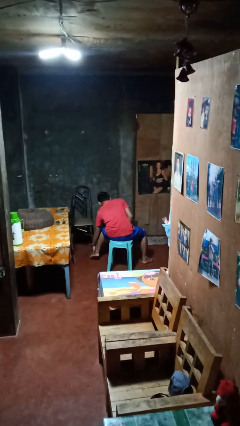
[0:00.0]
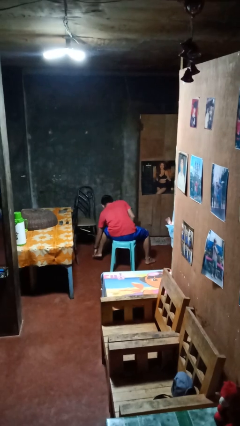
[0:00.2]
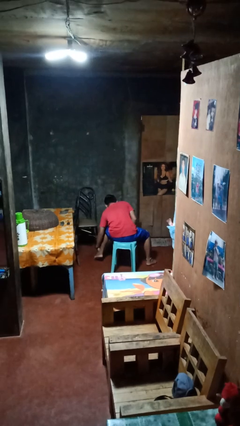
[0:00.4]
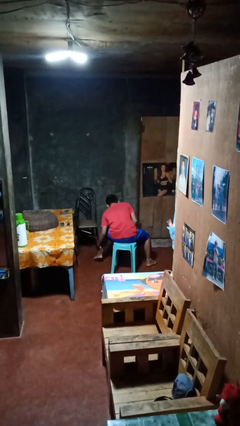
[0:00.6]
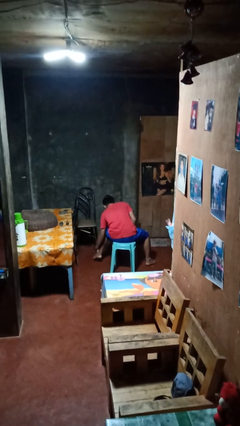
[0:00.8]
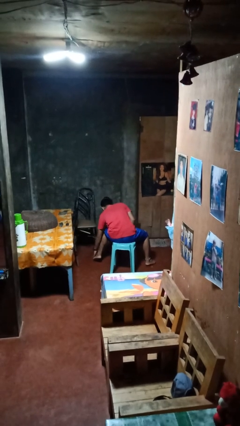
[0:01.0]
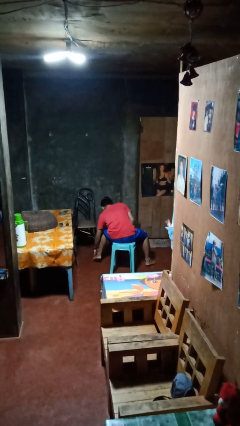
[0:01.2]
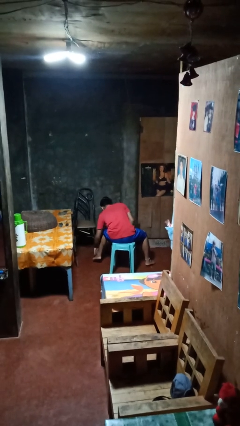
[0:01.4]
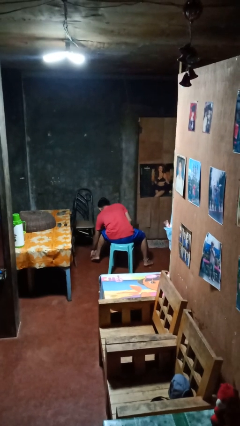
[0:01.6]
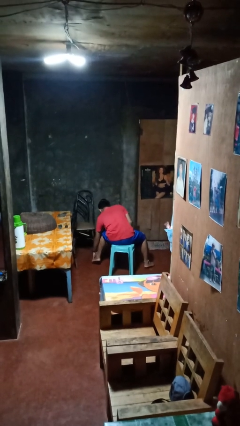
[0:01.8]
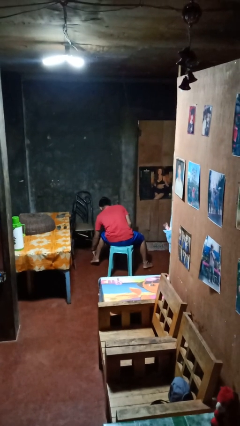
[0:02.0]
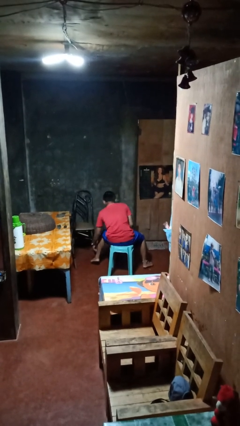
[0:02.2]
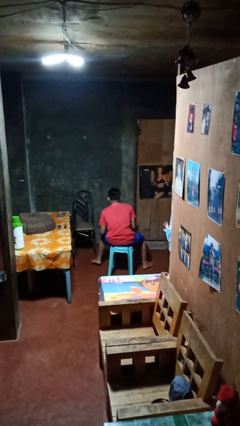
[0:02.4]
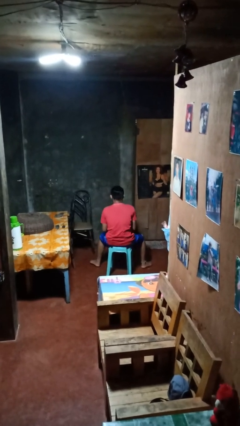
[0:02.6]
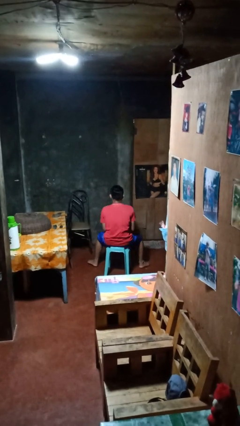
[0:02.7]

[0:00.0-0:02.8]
person rubs foot

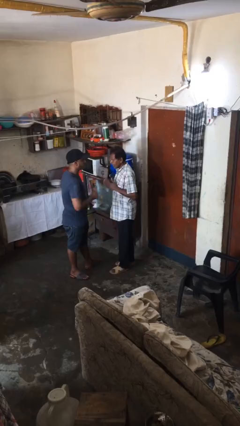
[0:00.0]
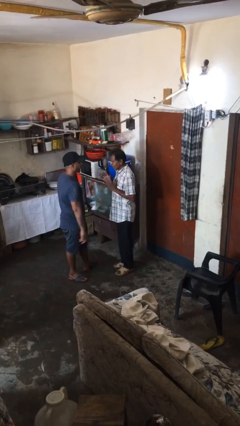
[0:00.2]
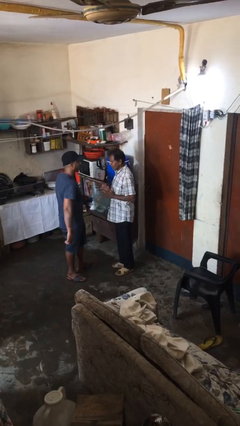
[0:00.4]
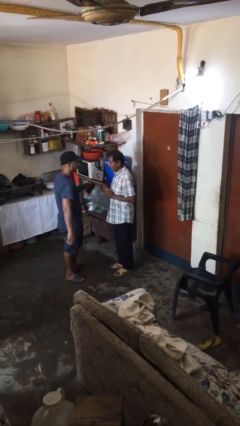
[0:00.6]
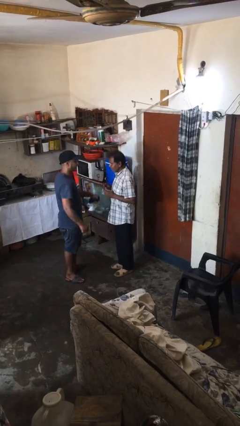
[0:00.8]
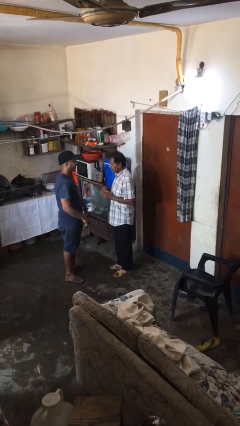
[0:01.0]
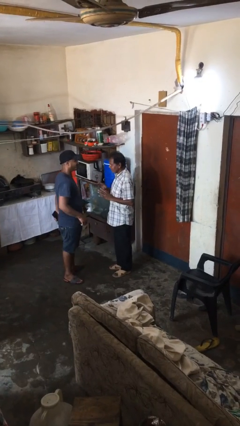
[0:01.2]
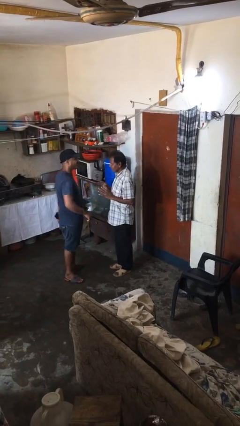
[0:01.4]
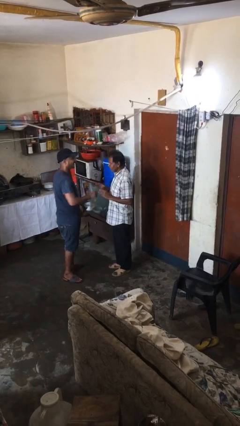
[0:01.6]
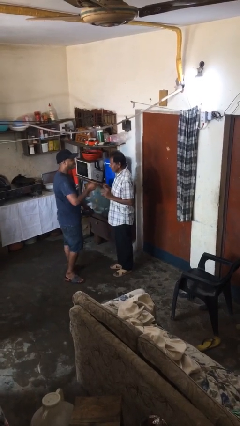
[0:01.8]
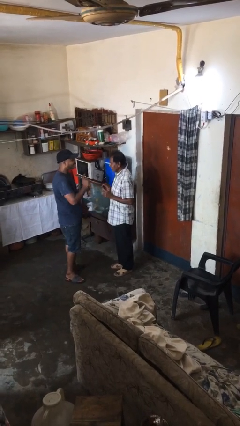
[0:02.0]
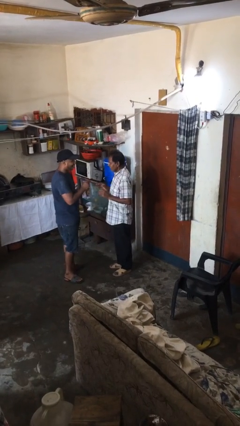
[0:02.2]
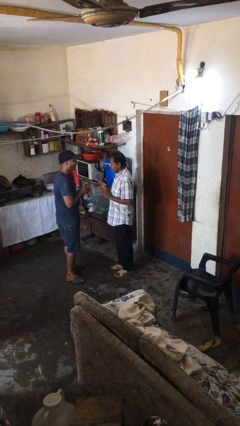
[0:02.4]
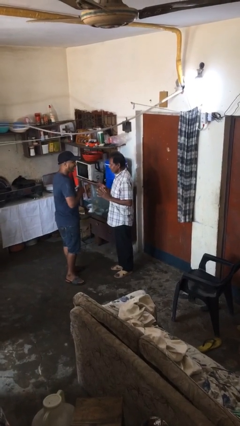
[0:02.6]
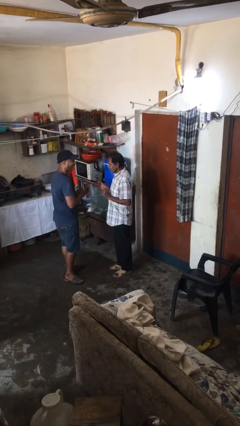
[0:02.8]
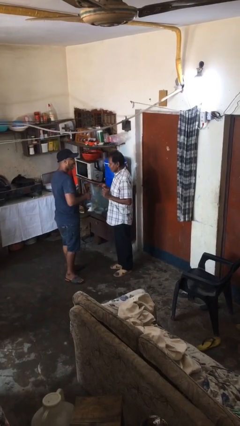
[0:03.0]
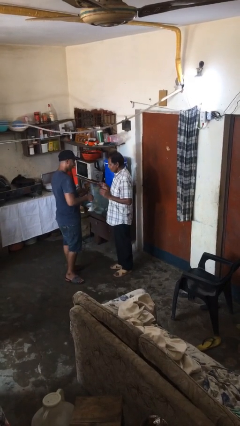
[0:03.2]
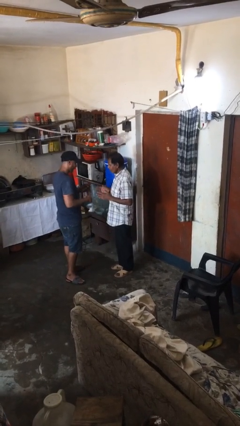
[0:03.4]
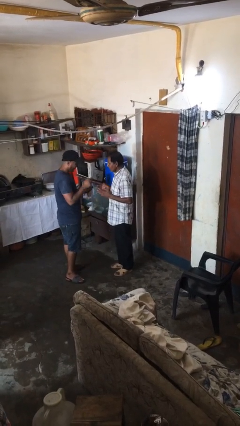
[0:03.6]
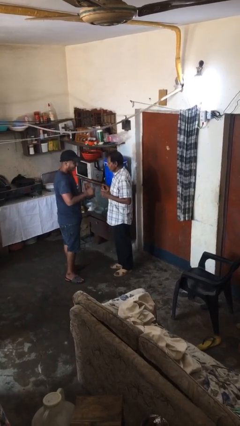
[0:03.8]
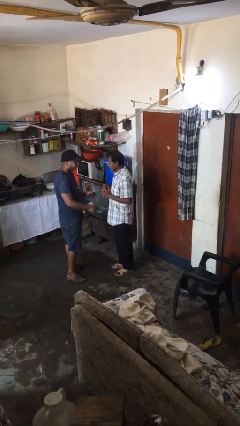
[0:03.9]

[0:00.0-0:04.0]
person talks to person

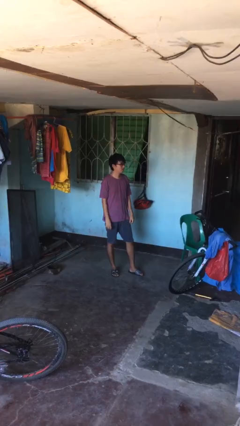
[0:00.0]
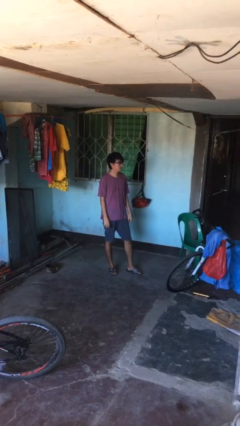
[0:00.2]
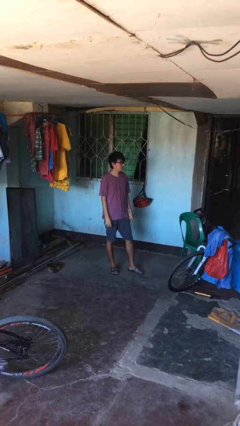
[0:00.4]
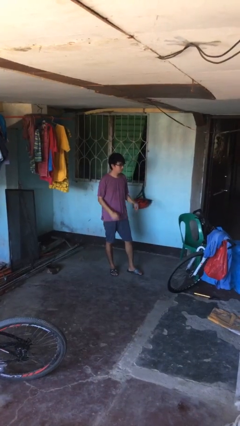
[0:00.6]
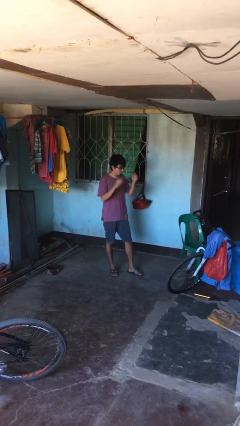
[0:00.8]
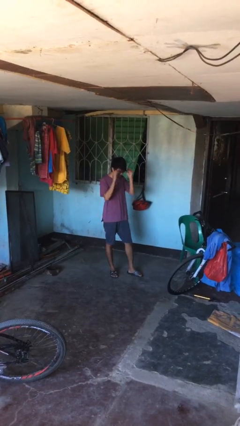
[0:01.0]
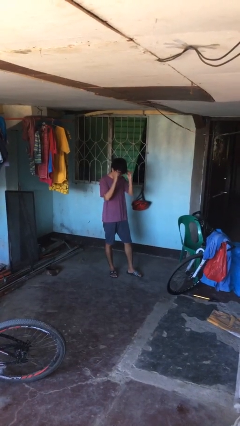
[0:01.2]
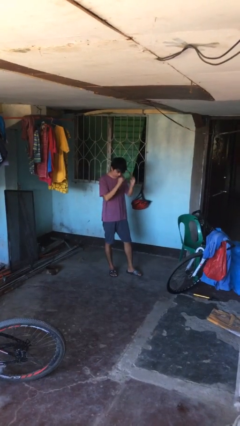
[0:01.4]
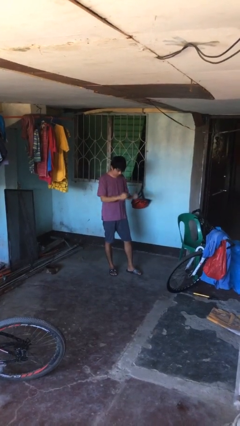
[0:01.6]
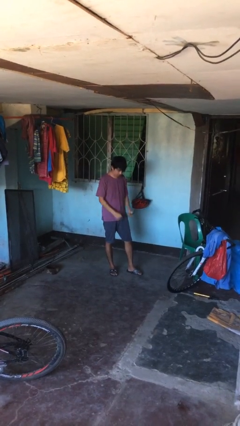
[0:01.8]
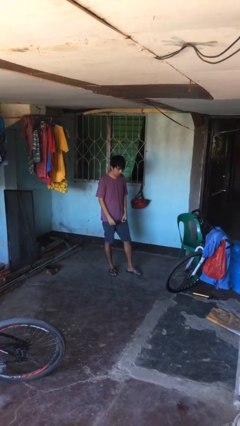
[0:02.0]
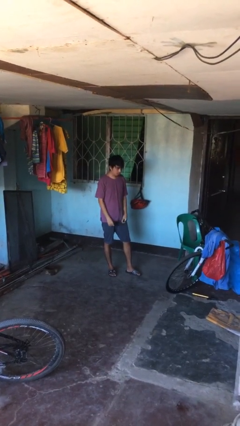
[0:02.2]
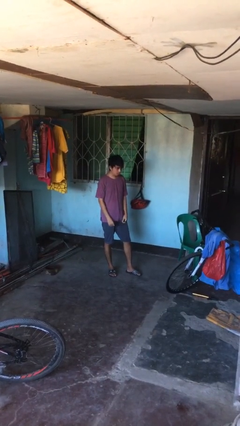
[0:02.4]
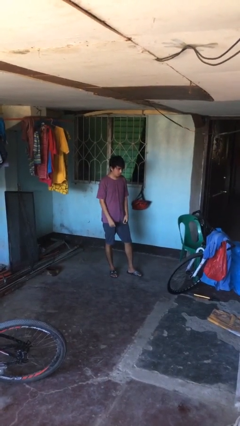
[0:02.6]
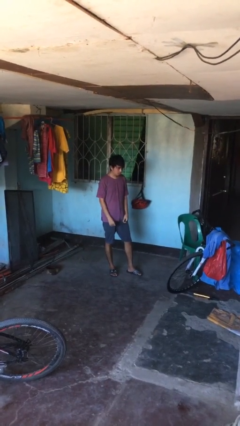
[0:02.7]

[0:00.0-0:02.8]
person takes off glasses

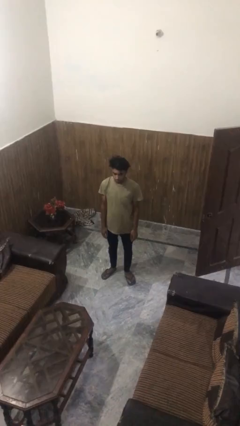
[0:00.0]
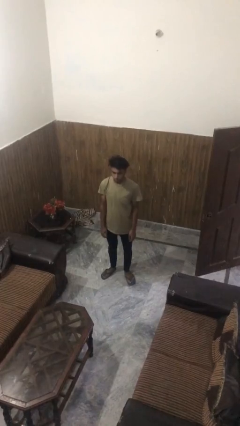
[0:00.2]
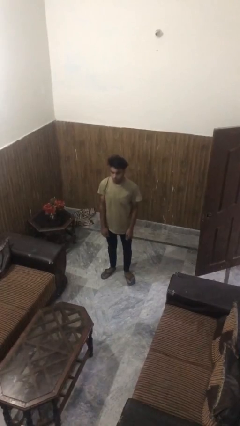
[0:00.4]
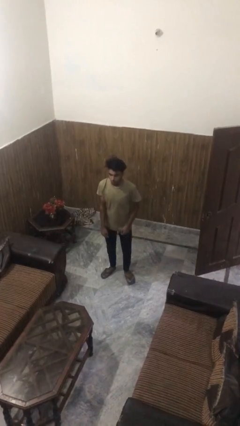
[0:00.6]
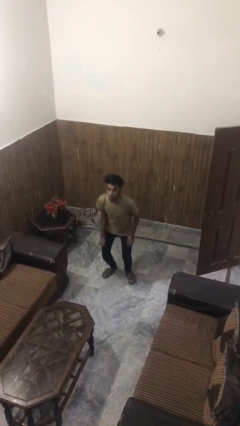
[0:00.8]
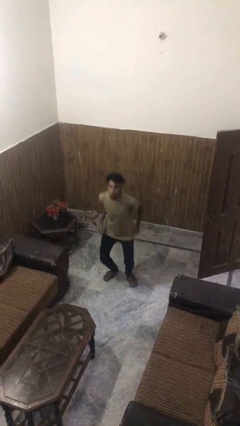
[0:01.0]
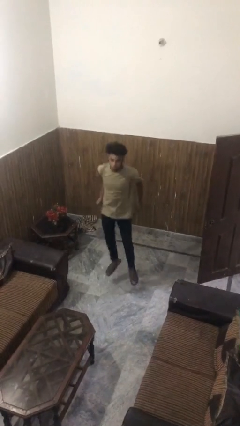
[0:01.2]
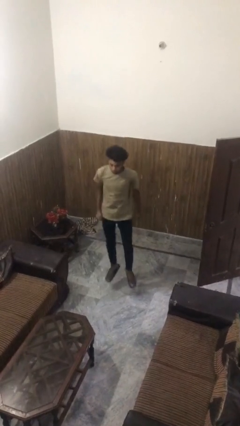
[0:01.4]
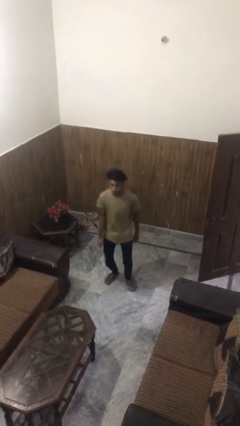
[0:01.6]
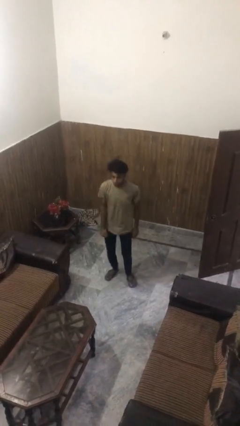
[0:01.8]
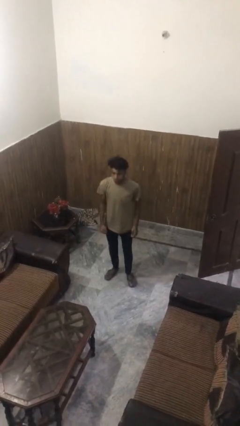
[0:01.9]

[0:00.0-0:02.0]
person jumps

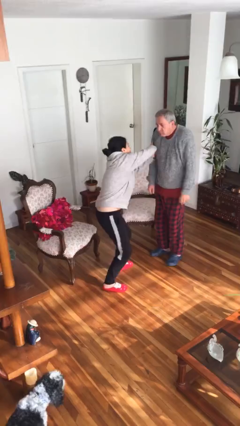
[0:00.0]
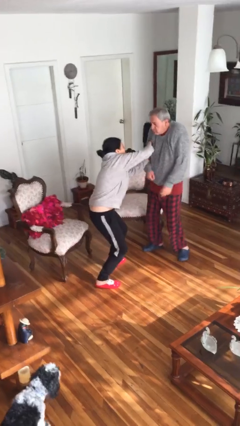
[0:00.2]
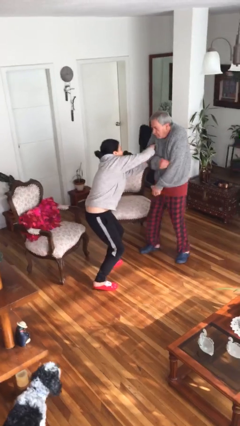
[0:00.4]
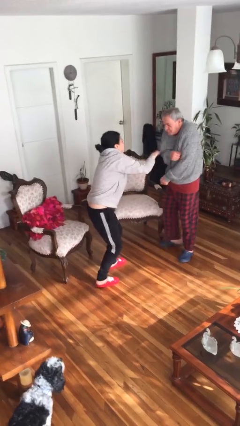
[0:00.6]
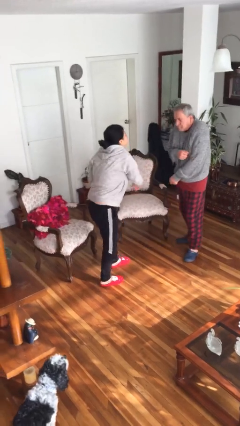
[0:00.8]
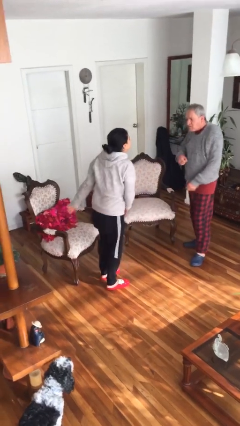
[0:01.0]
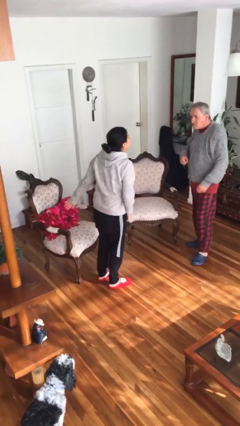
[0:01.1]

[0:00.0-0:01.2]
person tickles person

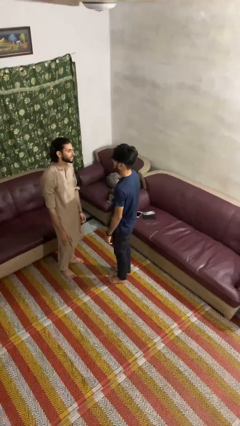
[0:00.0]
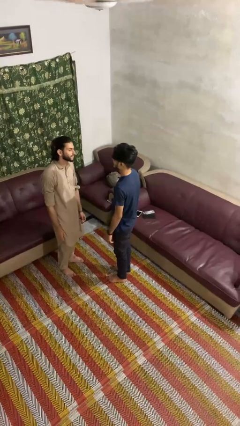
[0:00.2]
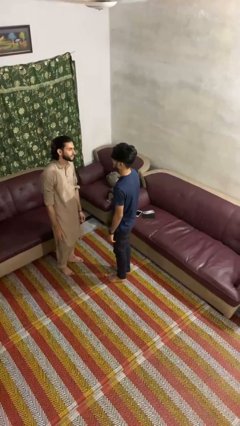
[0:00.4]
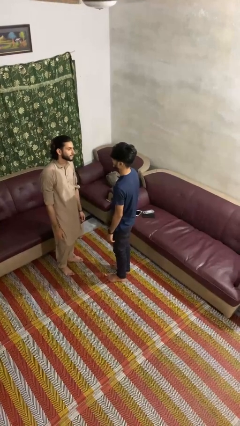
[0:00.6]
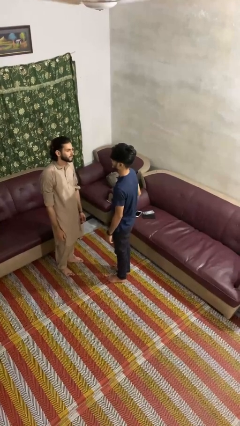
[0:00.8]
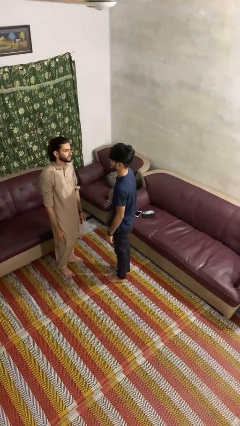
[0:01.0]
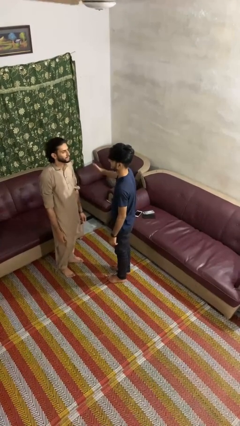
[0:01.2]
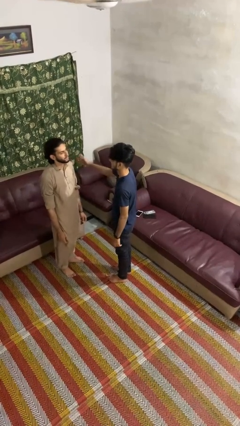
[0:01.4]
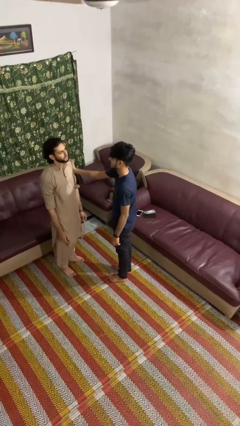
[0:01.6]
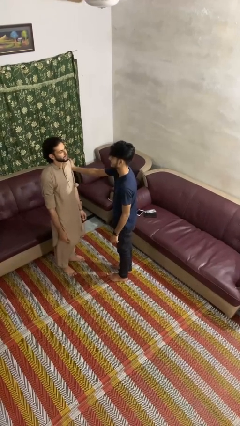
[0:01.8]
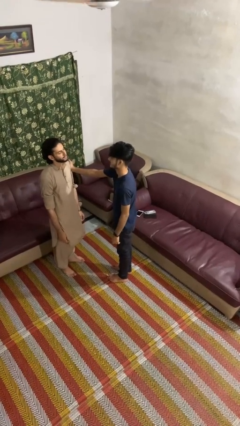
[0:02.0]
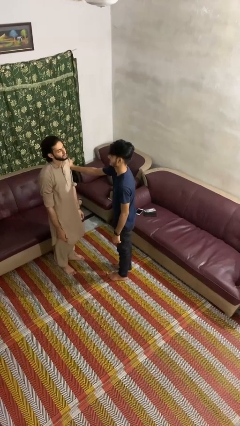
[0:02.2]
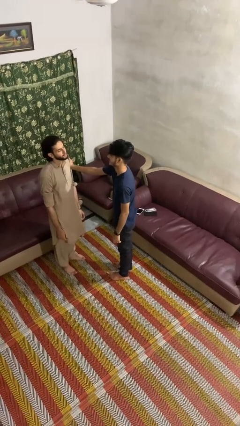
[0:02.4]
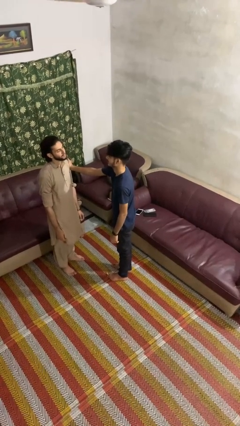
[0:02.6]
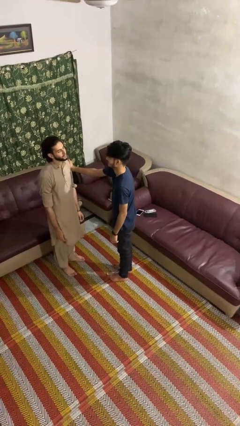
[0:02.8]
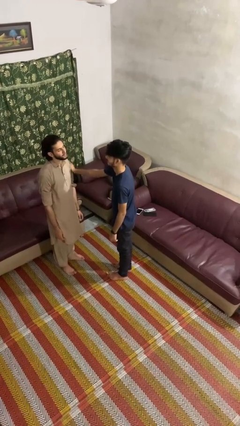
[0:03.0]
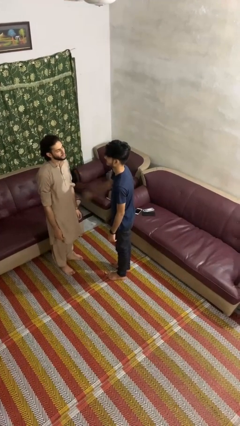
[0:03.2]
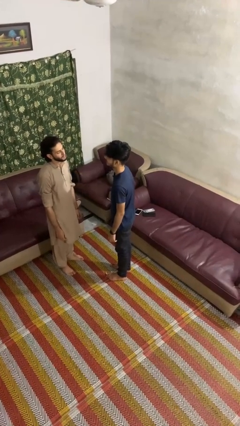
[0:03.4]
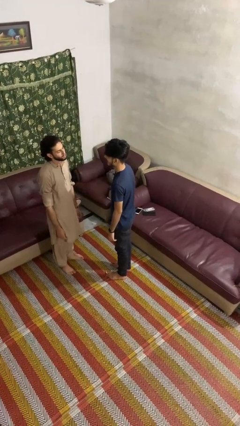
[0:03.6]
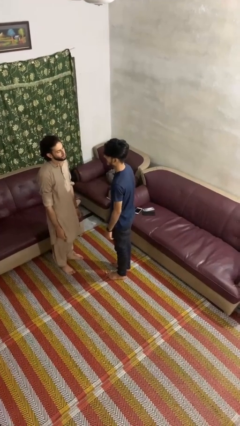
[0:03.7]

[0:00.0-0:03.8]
person grabs person by bicep

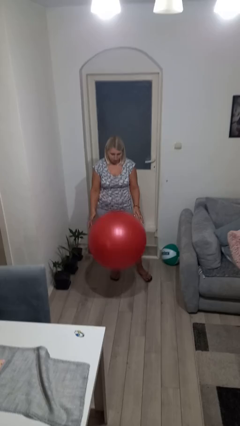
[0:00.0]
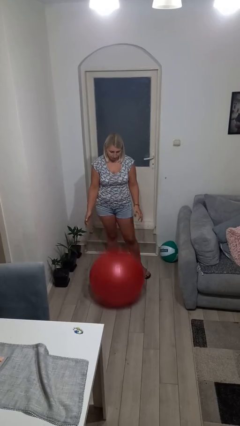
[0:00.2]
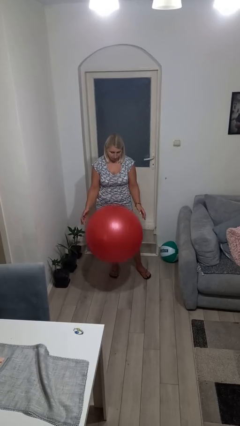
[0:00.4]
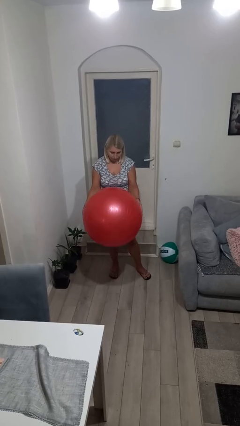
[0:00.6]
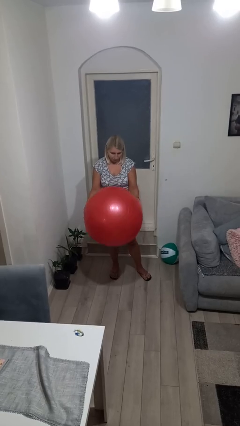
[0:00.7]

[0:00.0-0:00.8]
person bounces ball on floor
